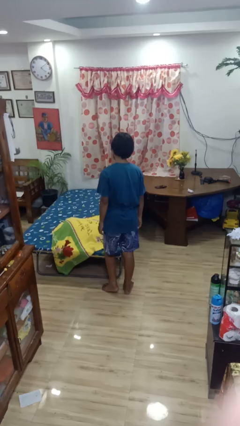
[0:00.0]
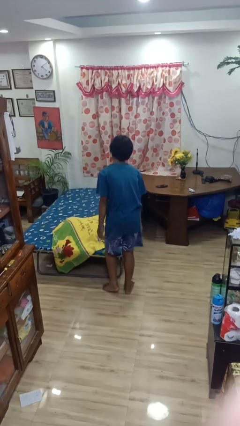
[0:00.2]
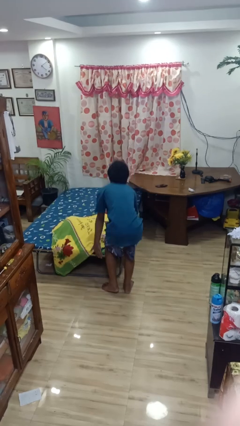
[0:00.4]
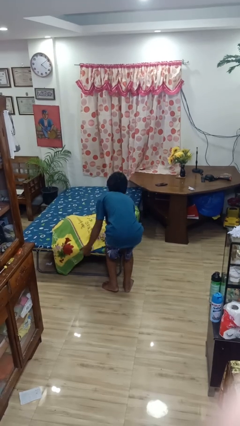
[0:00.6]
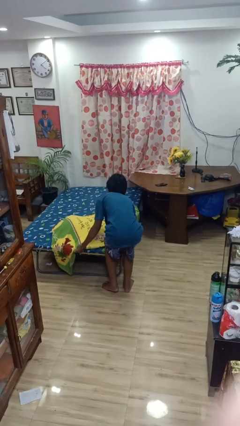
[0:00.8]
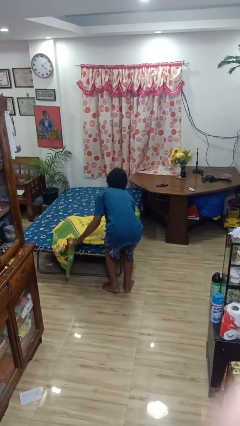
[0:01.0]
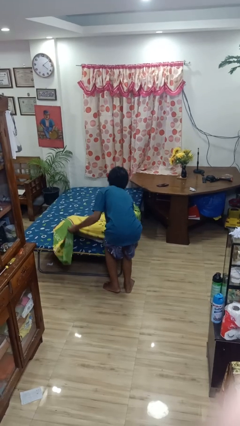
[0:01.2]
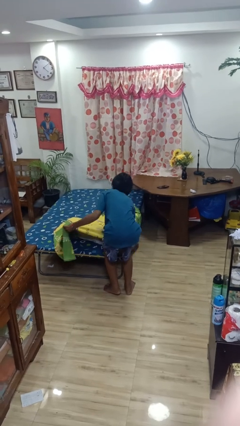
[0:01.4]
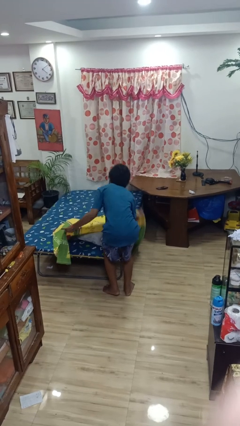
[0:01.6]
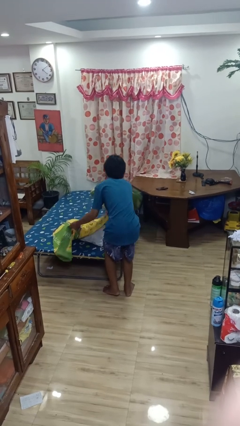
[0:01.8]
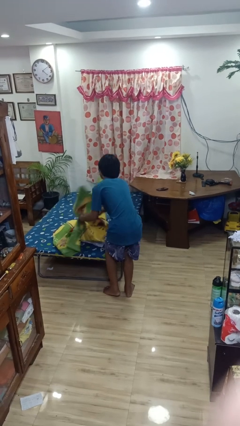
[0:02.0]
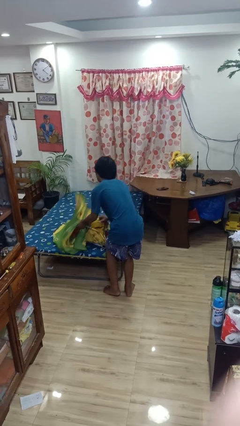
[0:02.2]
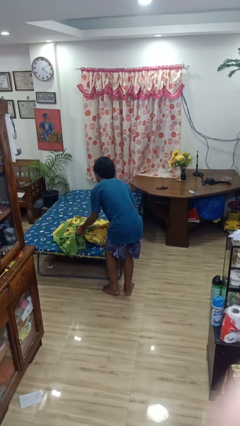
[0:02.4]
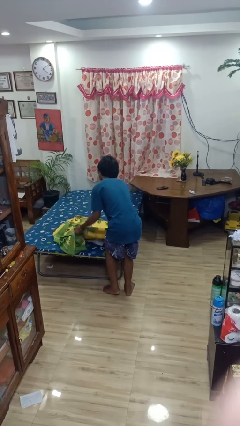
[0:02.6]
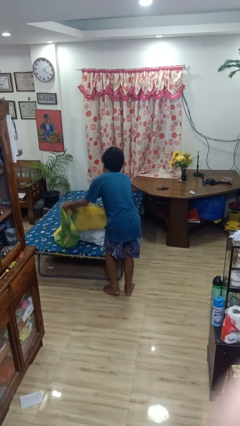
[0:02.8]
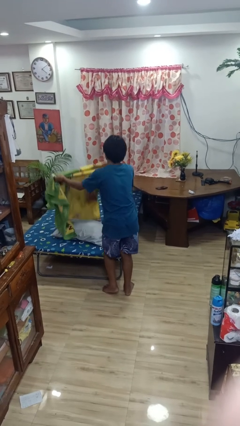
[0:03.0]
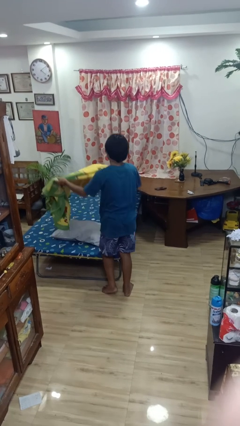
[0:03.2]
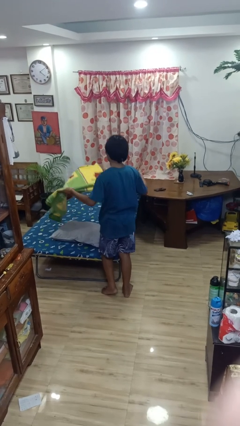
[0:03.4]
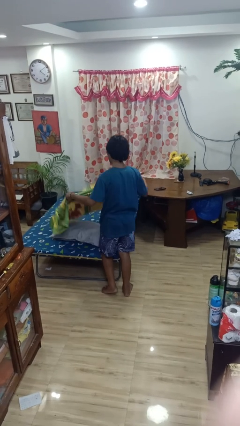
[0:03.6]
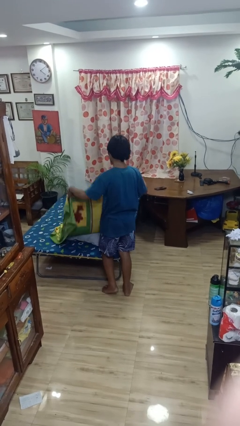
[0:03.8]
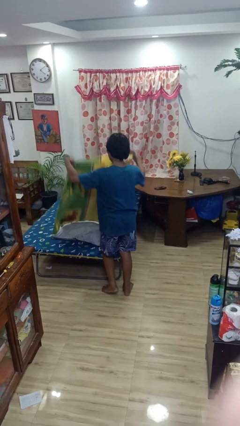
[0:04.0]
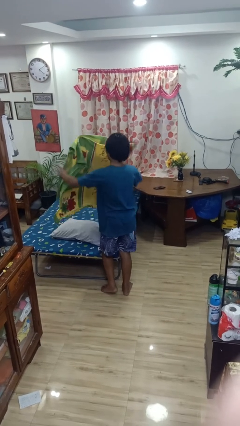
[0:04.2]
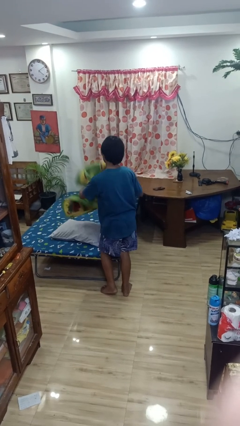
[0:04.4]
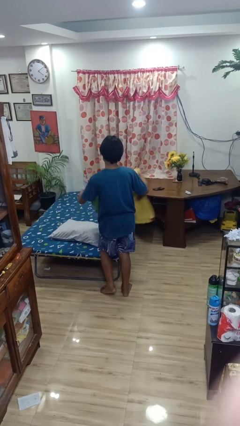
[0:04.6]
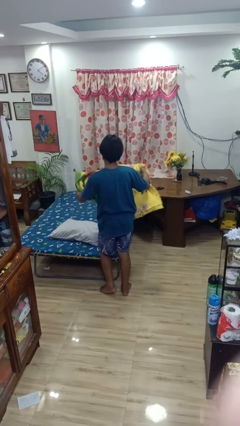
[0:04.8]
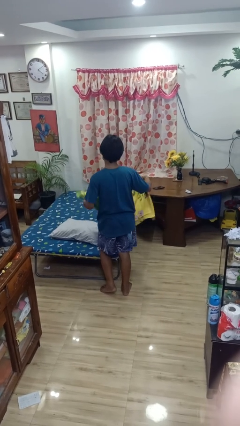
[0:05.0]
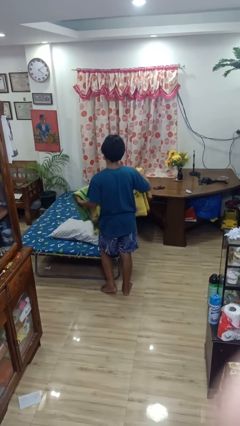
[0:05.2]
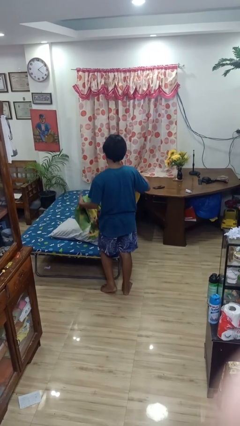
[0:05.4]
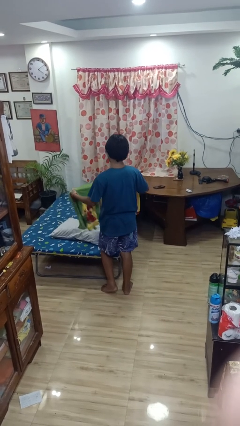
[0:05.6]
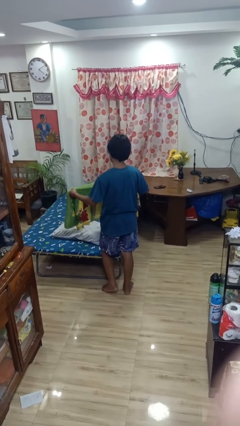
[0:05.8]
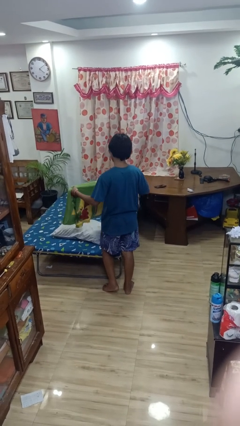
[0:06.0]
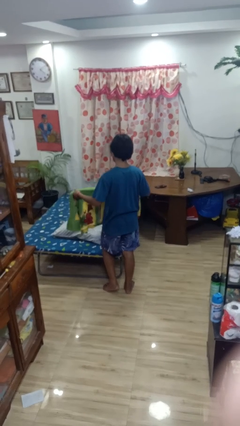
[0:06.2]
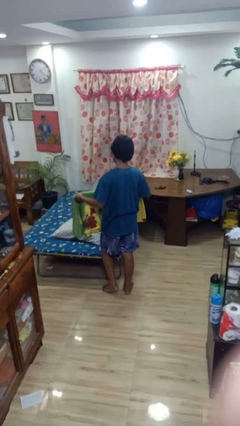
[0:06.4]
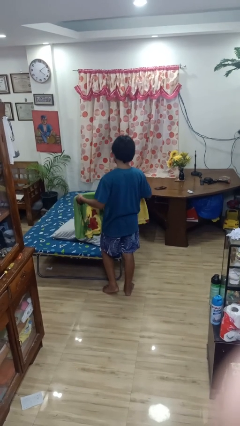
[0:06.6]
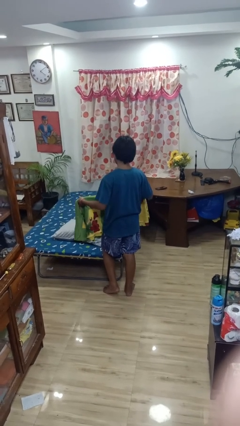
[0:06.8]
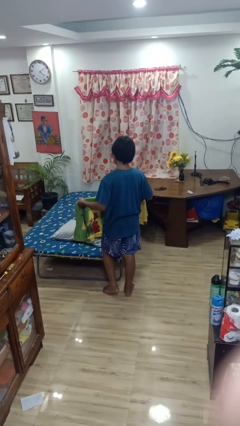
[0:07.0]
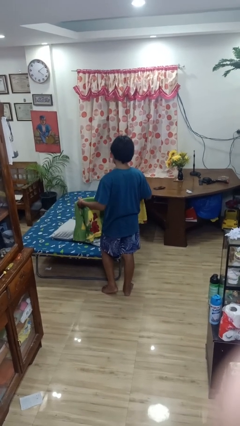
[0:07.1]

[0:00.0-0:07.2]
person folds blanket

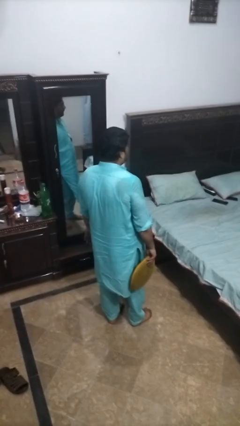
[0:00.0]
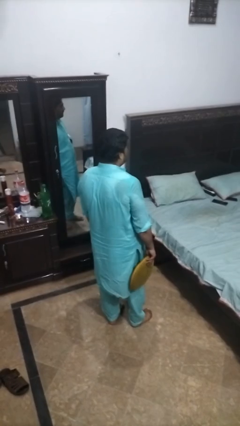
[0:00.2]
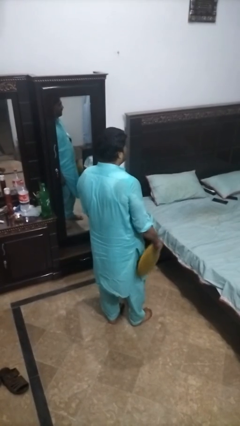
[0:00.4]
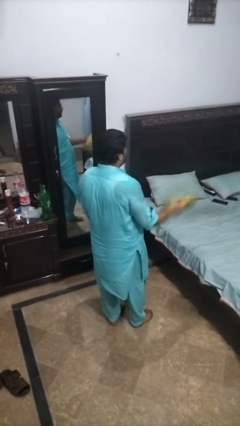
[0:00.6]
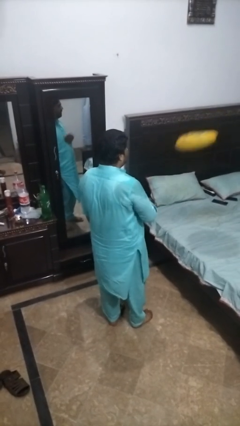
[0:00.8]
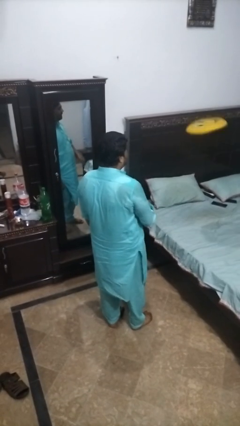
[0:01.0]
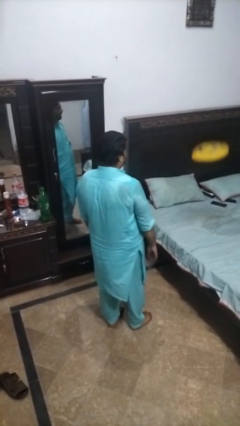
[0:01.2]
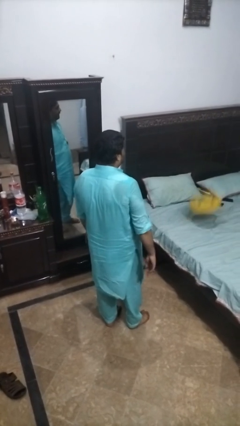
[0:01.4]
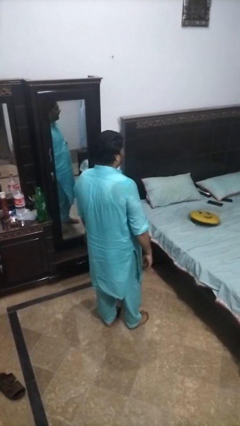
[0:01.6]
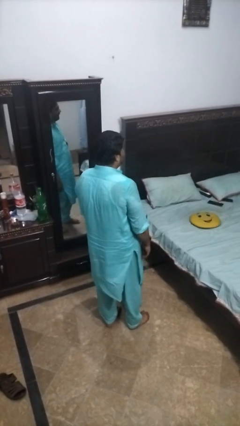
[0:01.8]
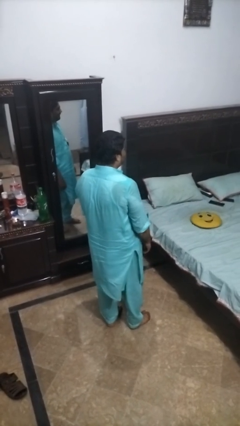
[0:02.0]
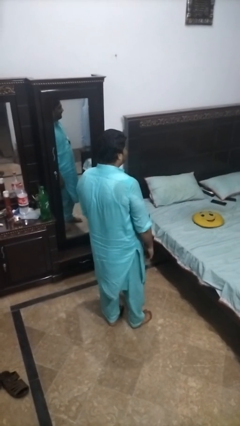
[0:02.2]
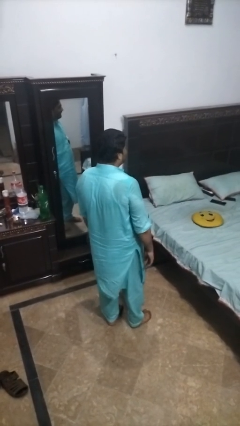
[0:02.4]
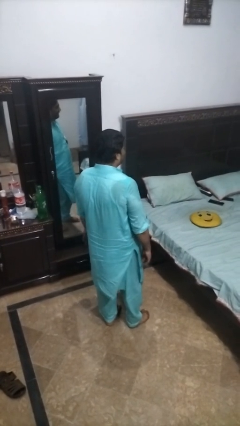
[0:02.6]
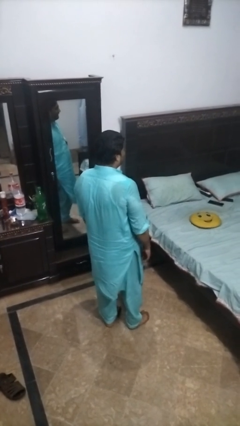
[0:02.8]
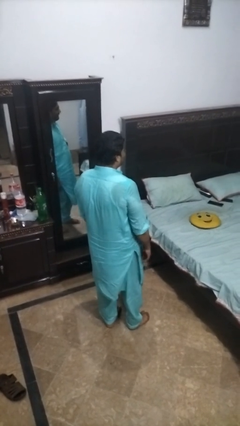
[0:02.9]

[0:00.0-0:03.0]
person throws object on bed

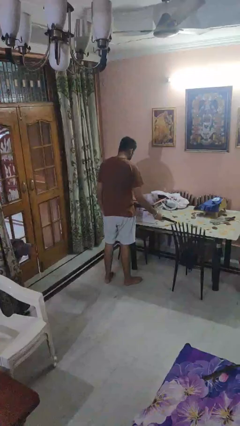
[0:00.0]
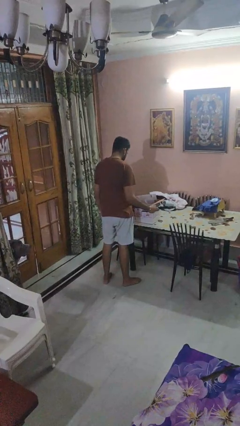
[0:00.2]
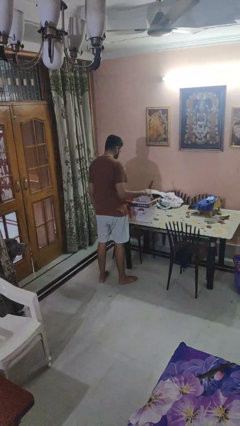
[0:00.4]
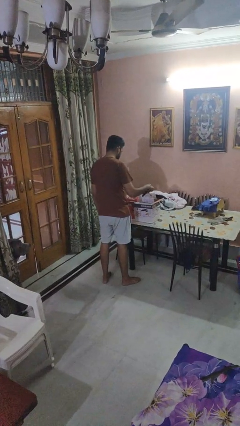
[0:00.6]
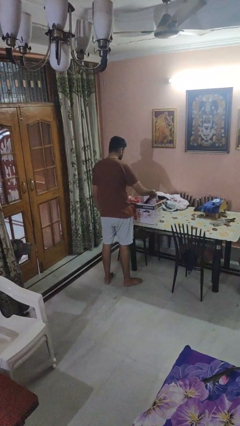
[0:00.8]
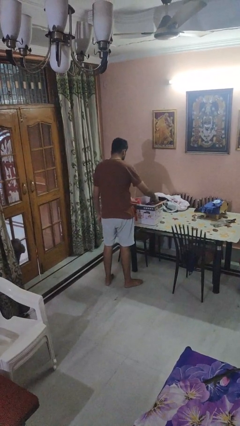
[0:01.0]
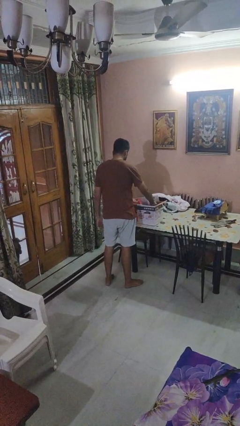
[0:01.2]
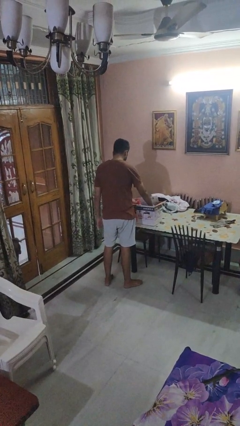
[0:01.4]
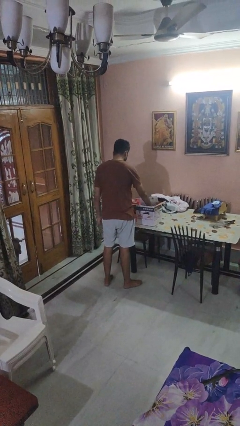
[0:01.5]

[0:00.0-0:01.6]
person puts object into box

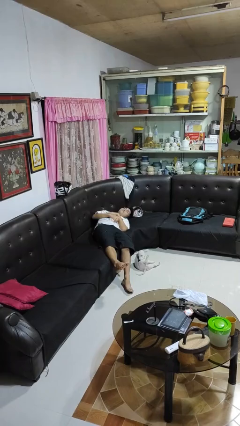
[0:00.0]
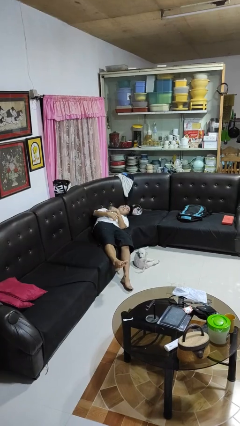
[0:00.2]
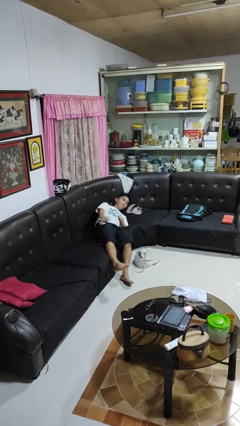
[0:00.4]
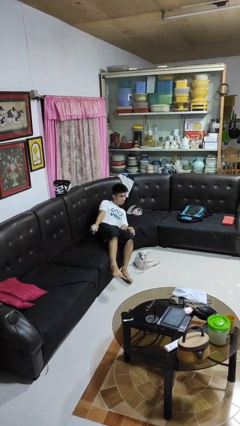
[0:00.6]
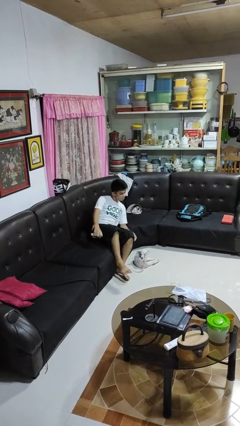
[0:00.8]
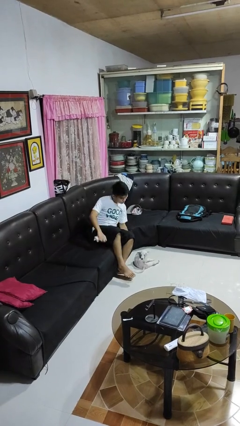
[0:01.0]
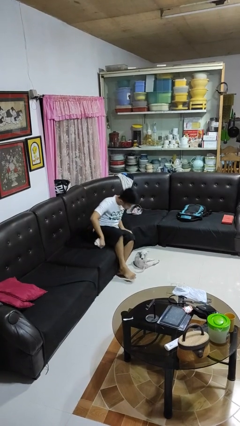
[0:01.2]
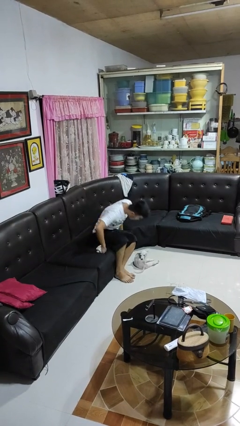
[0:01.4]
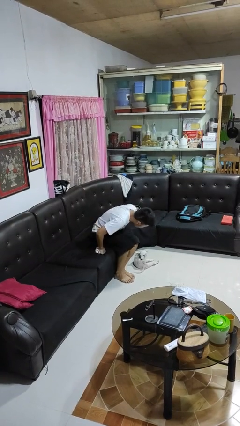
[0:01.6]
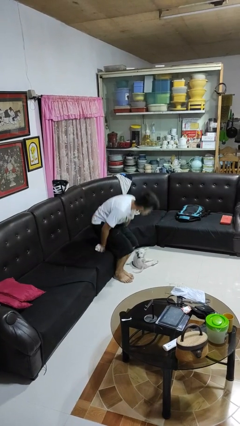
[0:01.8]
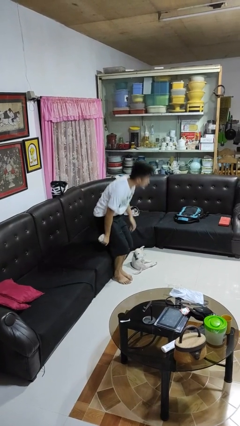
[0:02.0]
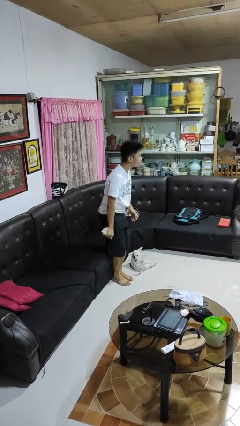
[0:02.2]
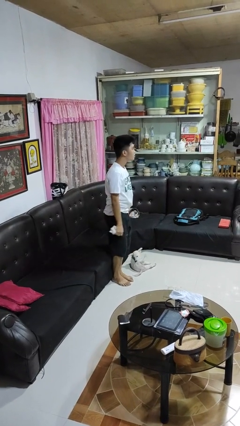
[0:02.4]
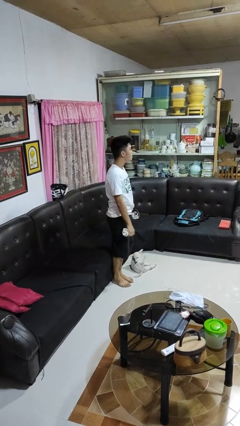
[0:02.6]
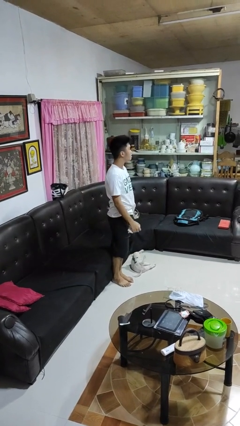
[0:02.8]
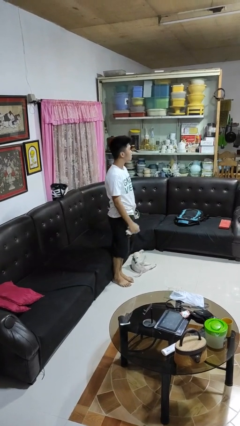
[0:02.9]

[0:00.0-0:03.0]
person stands up

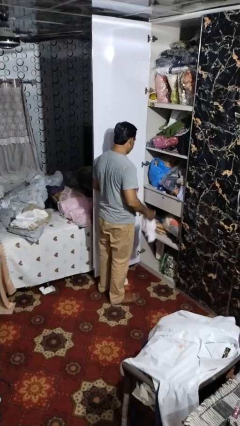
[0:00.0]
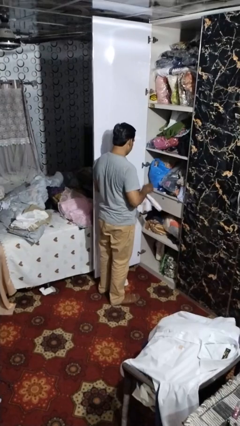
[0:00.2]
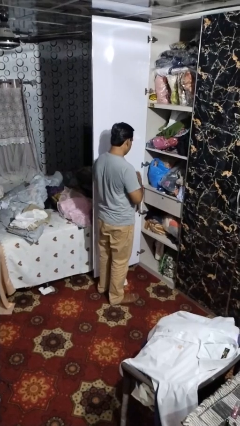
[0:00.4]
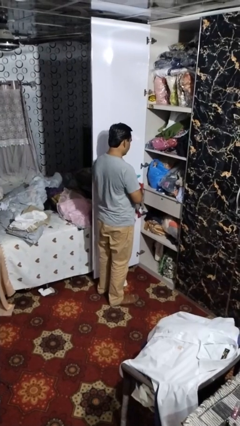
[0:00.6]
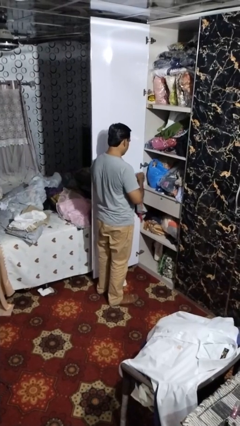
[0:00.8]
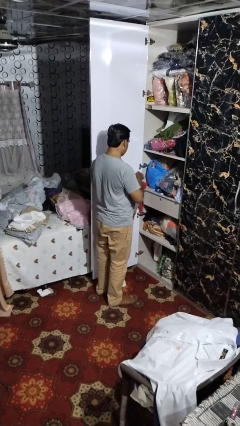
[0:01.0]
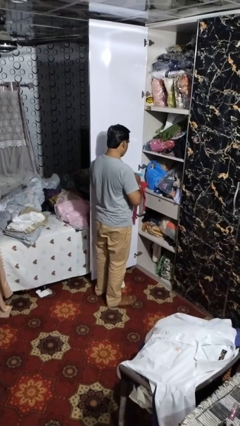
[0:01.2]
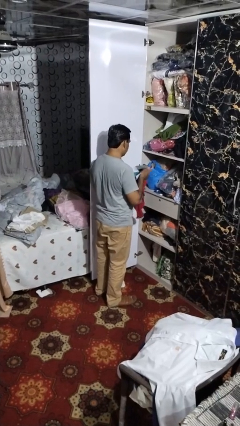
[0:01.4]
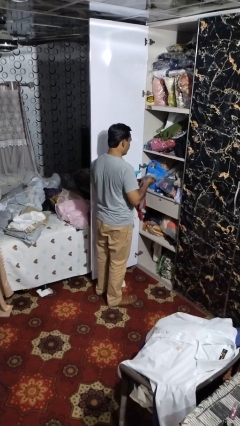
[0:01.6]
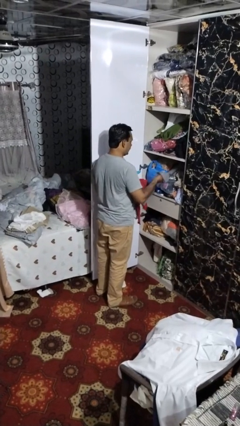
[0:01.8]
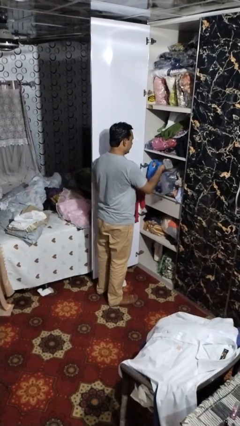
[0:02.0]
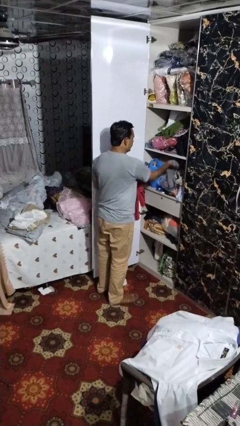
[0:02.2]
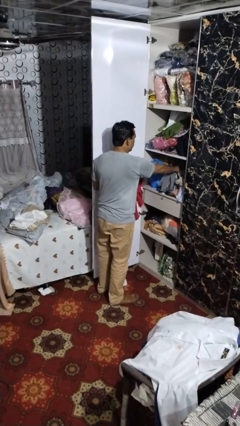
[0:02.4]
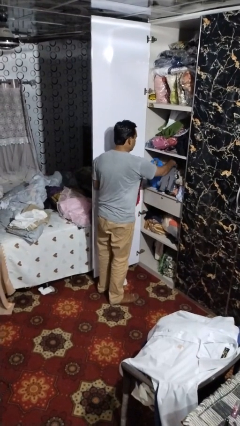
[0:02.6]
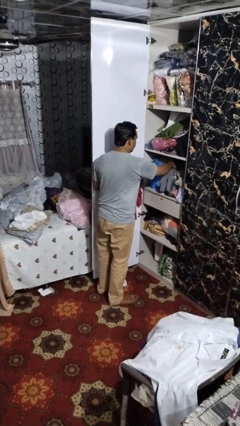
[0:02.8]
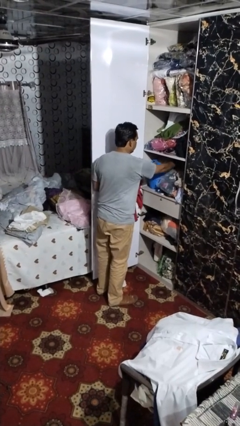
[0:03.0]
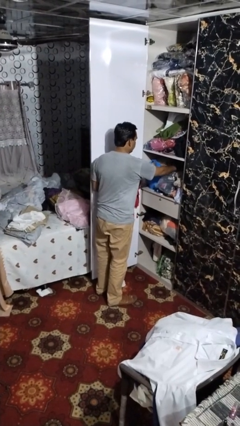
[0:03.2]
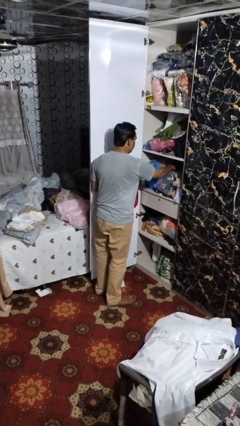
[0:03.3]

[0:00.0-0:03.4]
person puts clothes into dresser
